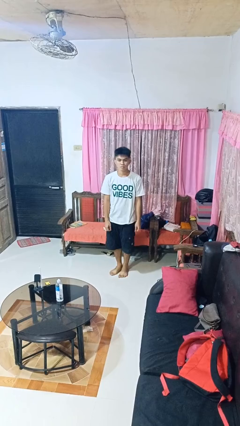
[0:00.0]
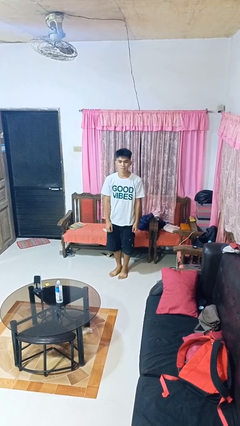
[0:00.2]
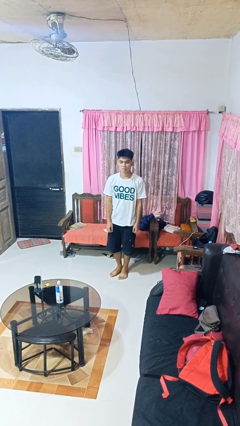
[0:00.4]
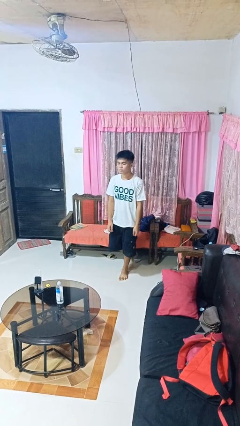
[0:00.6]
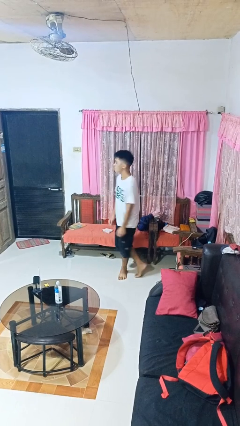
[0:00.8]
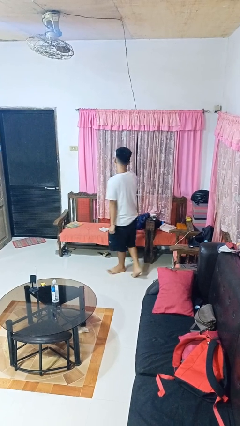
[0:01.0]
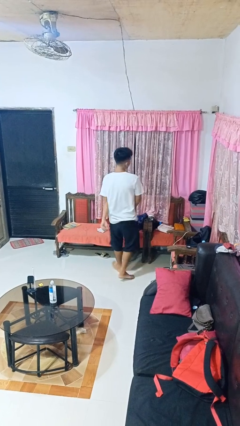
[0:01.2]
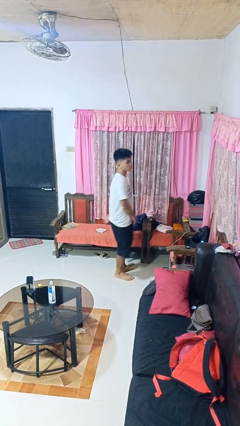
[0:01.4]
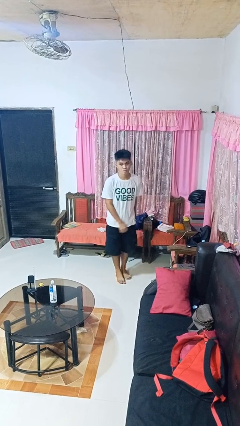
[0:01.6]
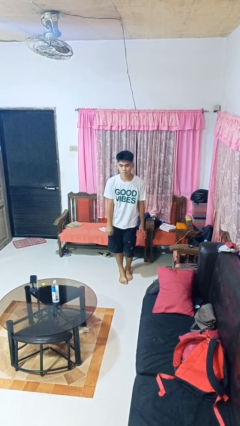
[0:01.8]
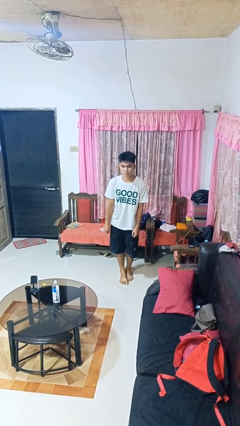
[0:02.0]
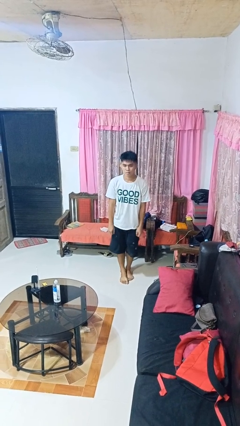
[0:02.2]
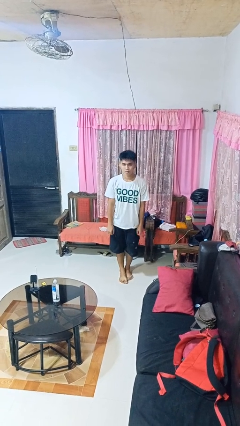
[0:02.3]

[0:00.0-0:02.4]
person twirls

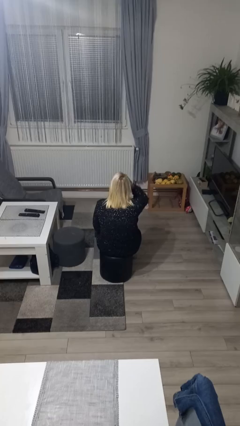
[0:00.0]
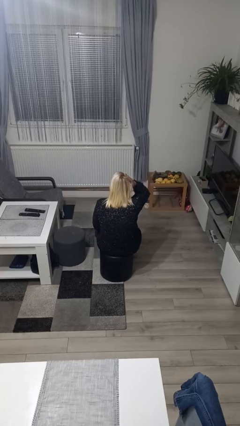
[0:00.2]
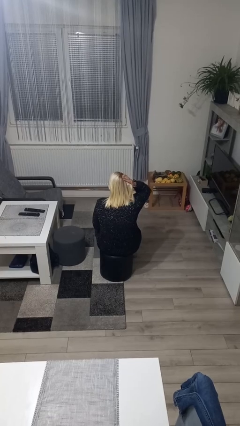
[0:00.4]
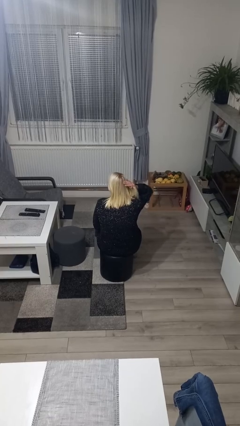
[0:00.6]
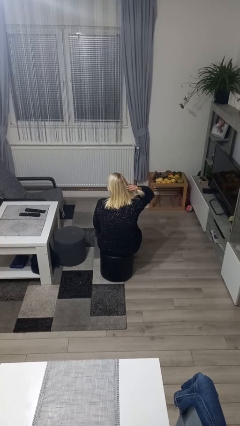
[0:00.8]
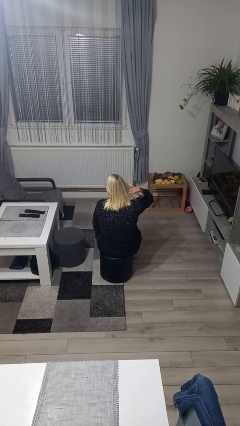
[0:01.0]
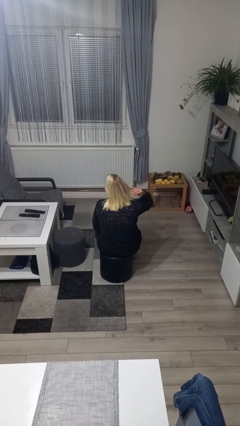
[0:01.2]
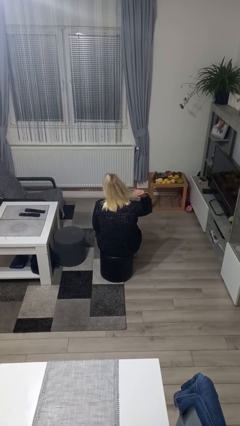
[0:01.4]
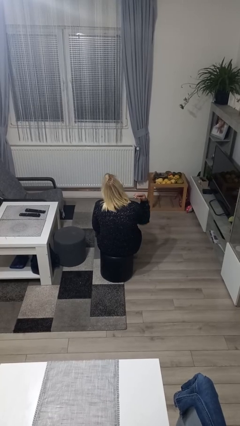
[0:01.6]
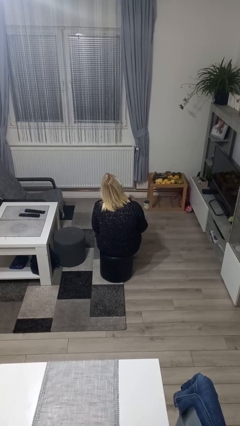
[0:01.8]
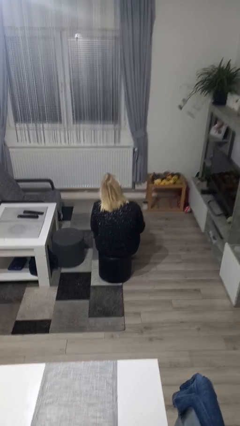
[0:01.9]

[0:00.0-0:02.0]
person strokes hair

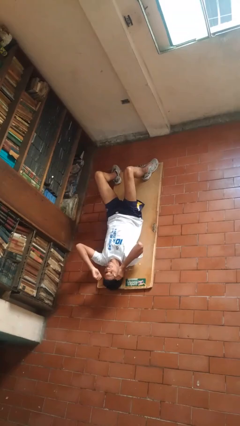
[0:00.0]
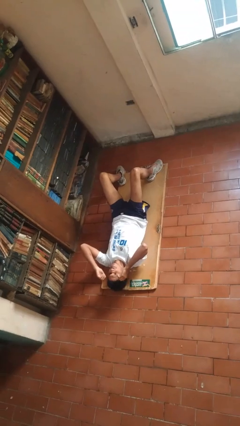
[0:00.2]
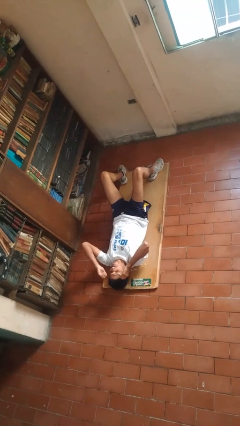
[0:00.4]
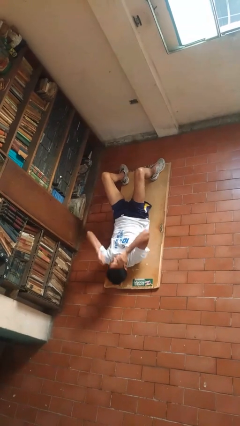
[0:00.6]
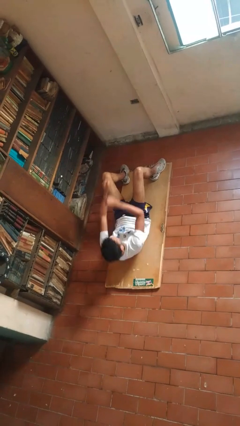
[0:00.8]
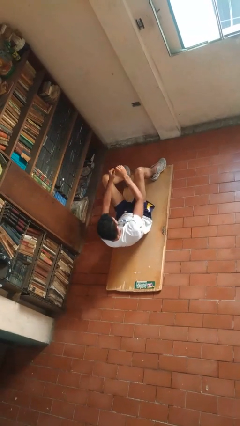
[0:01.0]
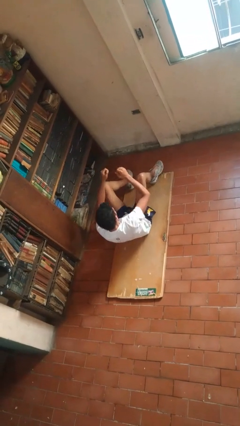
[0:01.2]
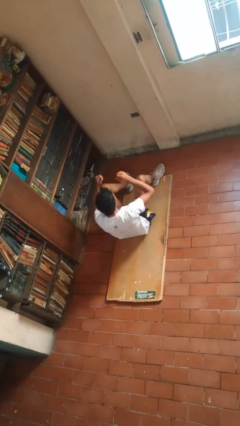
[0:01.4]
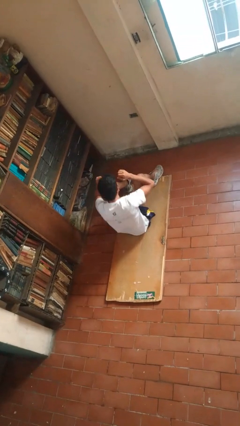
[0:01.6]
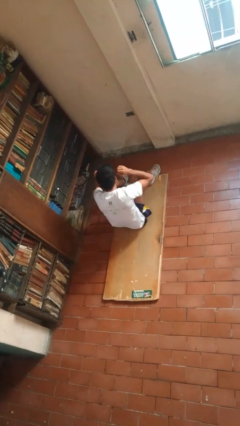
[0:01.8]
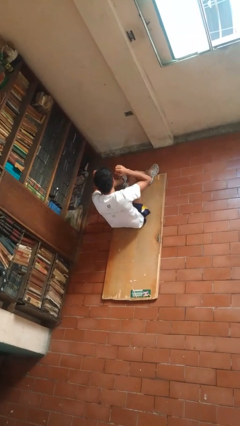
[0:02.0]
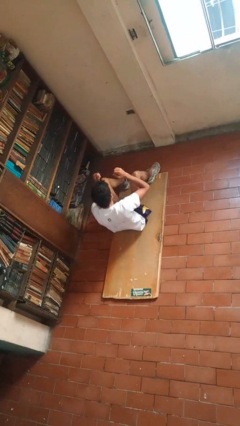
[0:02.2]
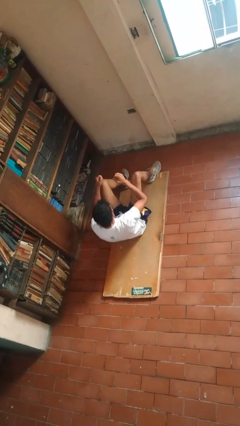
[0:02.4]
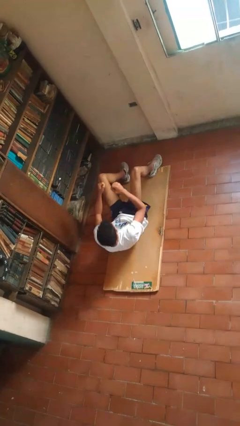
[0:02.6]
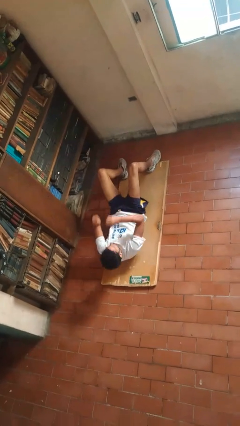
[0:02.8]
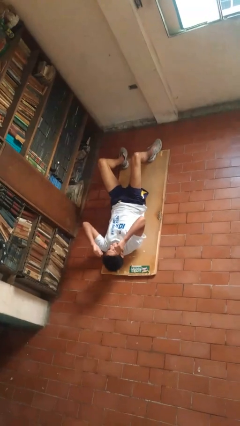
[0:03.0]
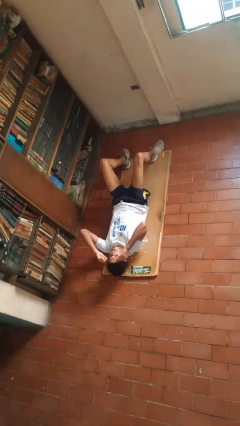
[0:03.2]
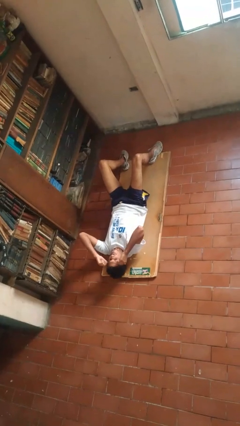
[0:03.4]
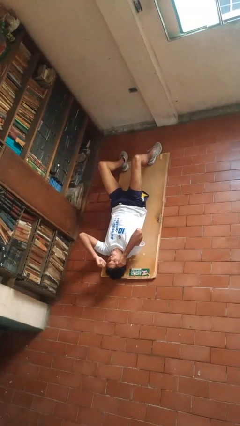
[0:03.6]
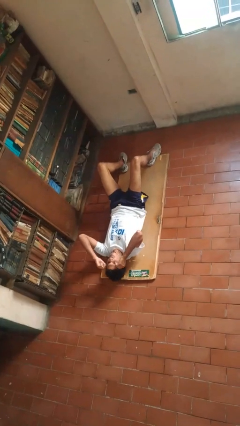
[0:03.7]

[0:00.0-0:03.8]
person exercises with situp

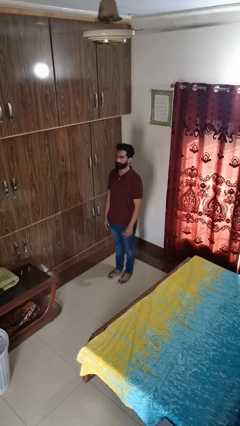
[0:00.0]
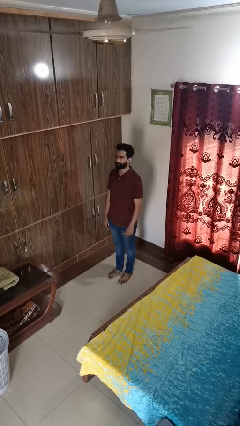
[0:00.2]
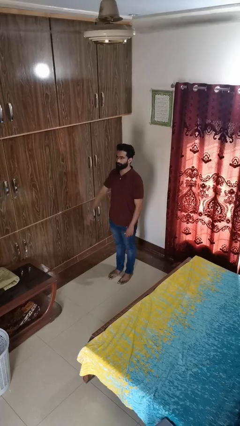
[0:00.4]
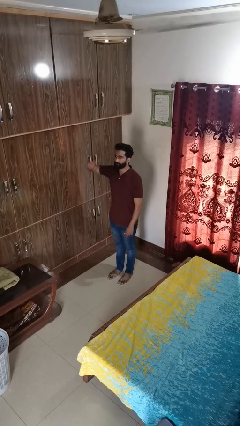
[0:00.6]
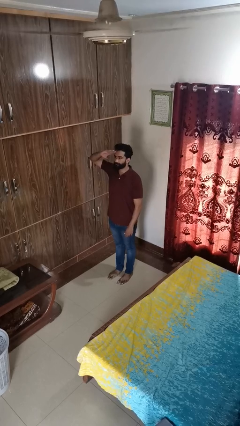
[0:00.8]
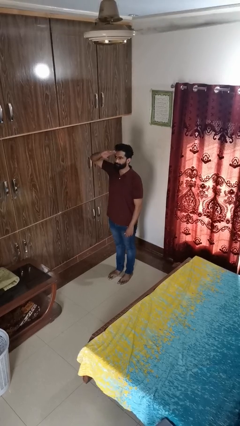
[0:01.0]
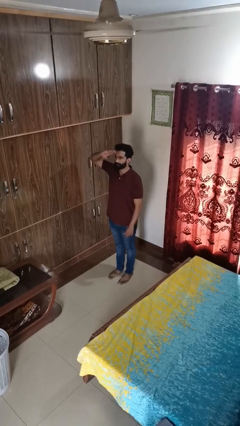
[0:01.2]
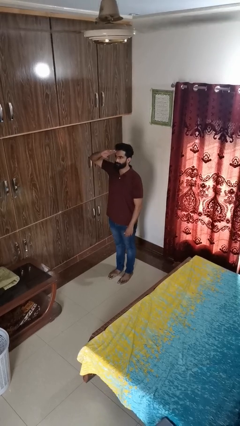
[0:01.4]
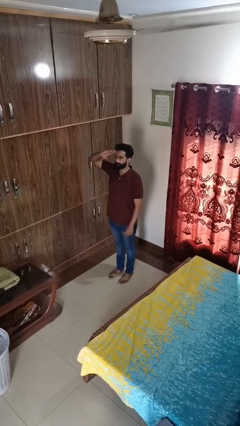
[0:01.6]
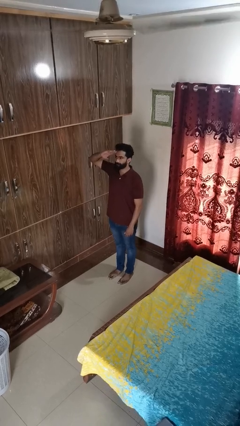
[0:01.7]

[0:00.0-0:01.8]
person salutes

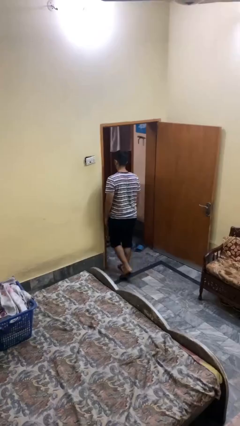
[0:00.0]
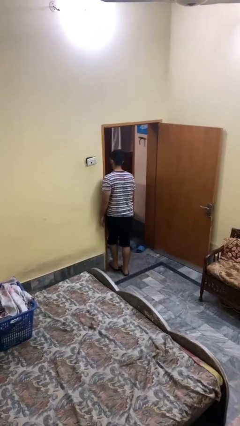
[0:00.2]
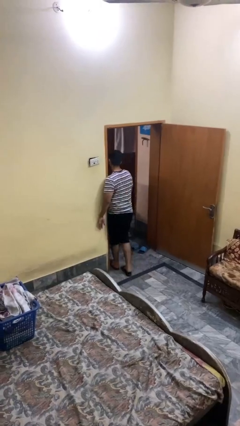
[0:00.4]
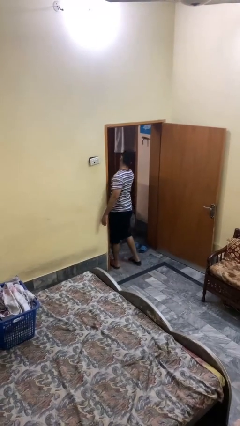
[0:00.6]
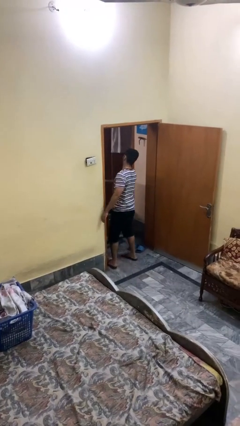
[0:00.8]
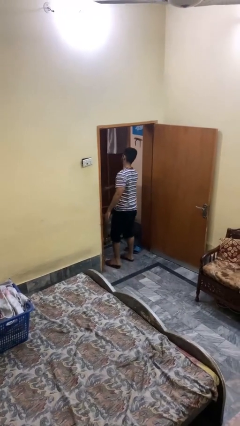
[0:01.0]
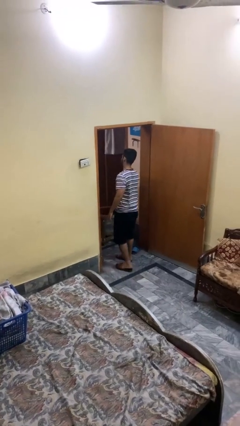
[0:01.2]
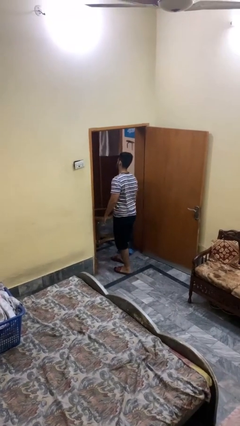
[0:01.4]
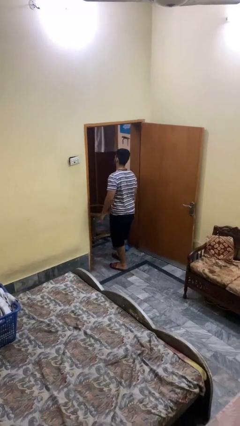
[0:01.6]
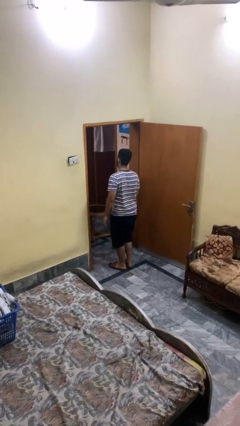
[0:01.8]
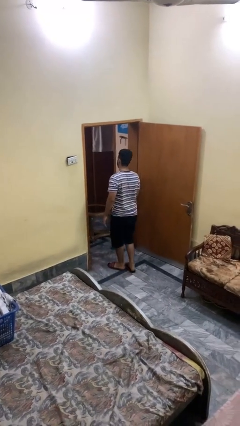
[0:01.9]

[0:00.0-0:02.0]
person bumps into wall

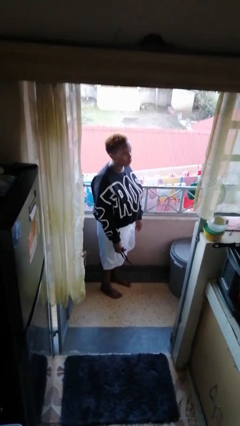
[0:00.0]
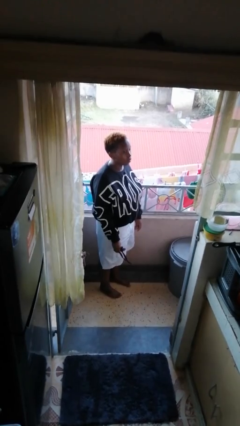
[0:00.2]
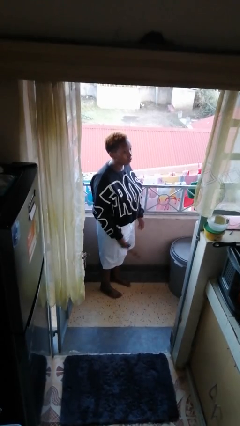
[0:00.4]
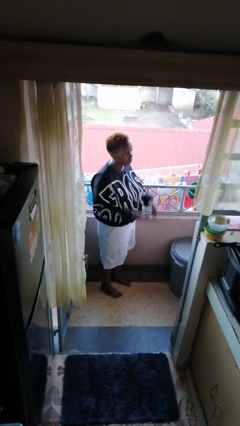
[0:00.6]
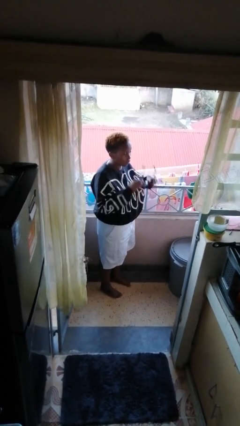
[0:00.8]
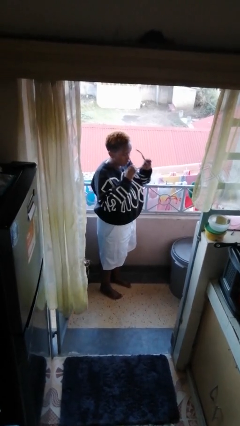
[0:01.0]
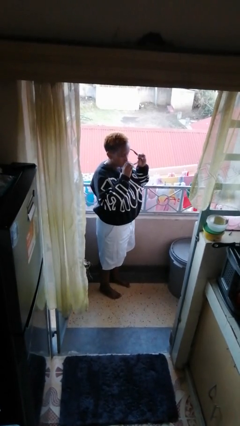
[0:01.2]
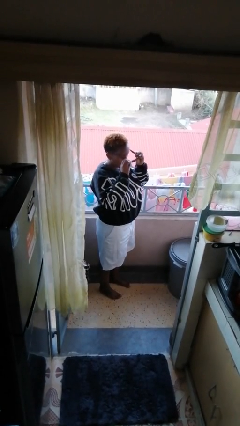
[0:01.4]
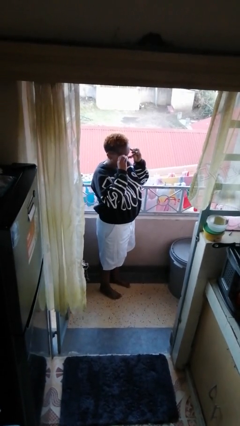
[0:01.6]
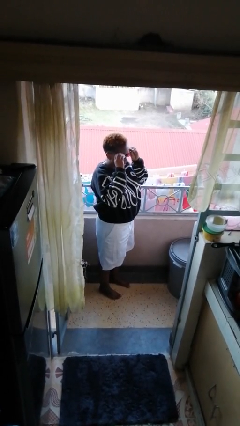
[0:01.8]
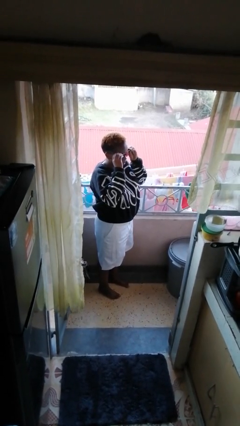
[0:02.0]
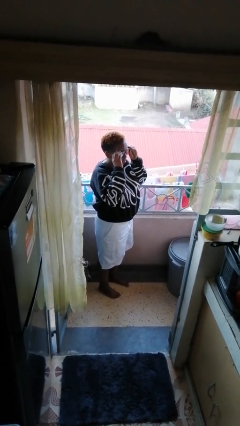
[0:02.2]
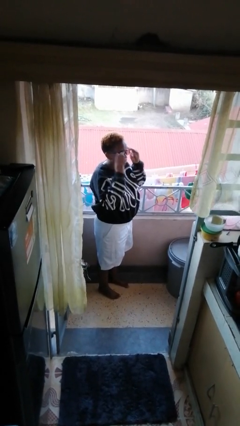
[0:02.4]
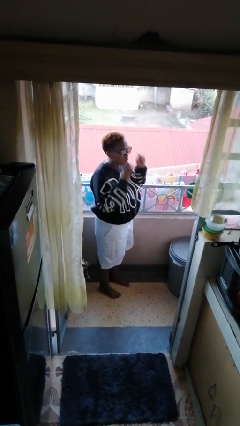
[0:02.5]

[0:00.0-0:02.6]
person puts on sunglasses

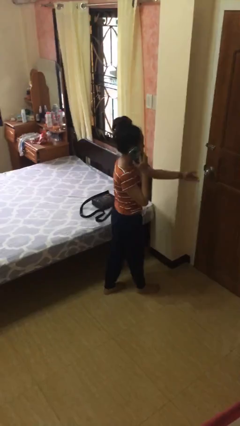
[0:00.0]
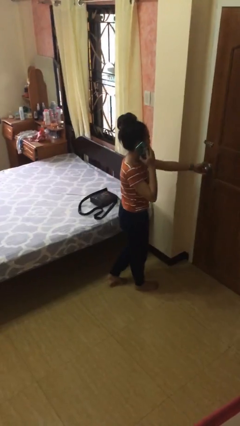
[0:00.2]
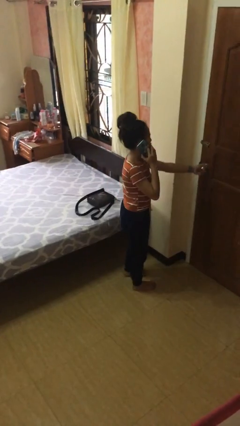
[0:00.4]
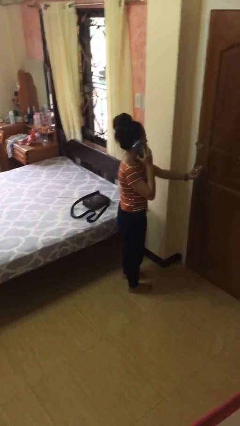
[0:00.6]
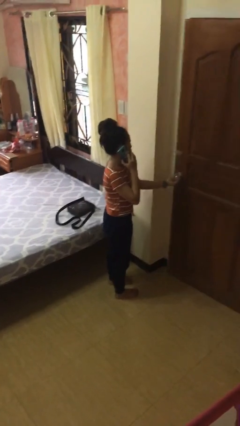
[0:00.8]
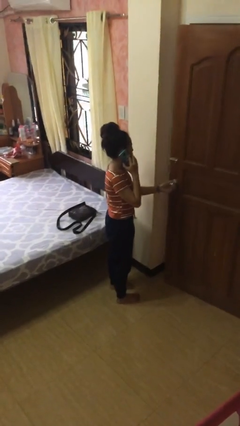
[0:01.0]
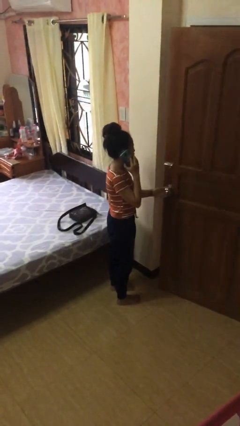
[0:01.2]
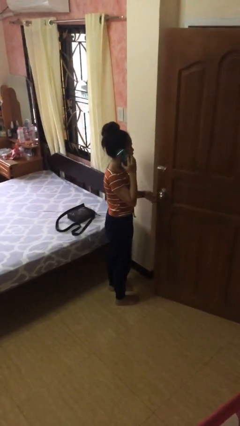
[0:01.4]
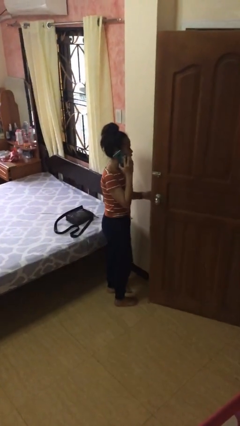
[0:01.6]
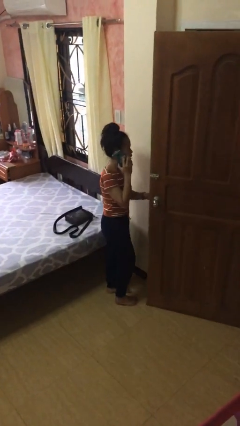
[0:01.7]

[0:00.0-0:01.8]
person opens facility door

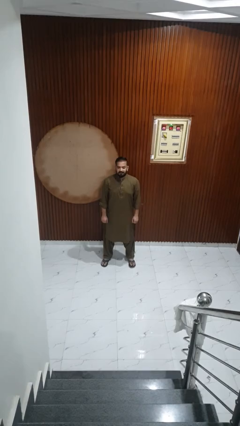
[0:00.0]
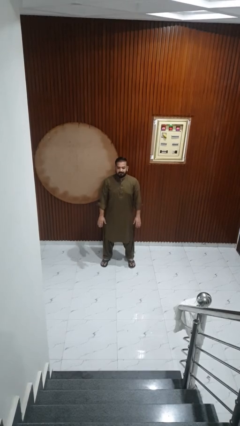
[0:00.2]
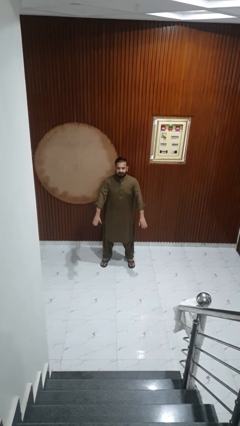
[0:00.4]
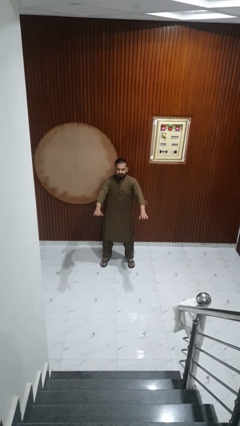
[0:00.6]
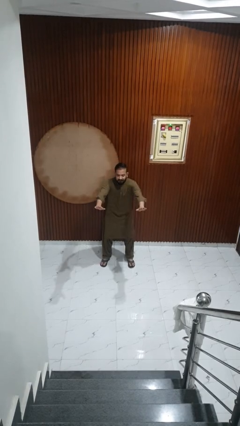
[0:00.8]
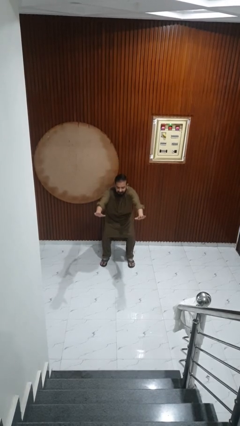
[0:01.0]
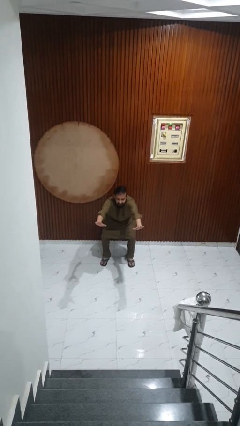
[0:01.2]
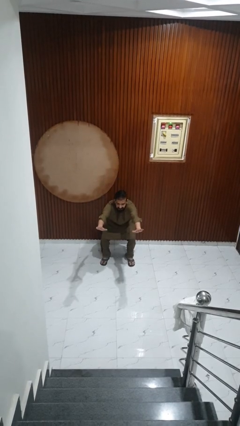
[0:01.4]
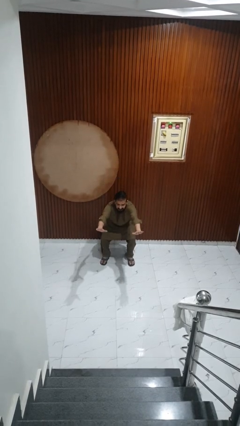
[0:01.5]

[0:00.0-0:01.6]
person squats
